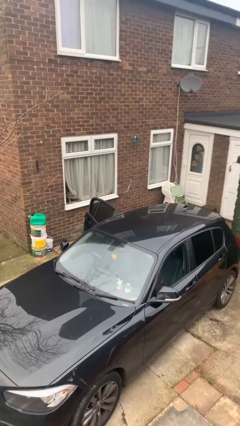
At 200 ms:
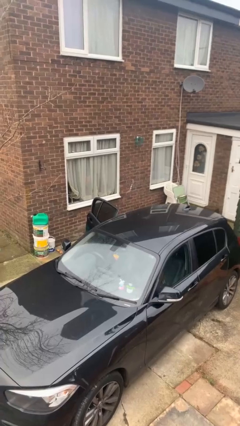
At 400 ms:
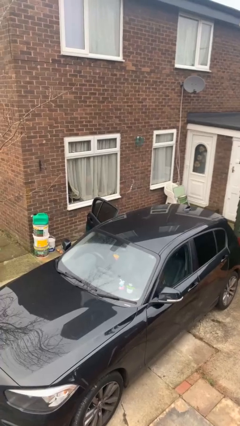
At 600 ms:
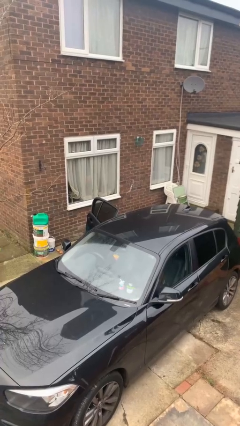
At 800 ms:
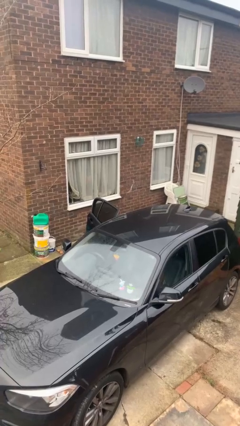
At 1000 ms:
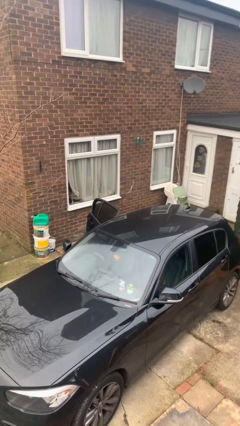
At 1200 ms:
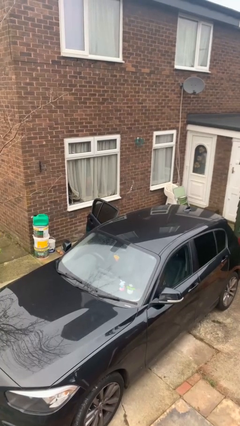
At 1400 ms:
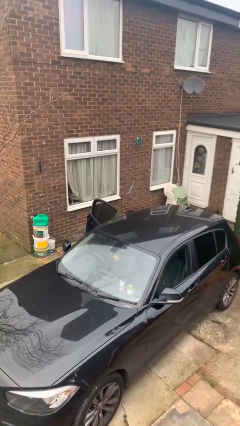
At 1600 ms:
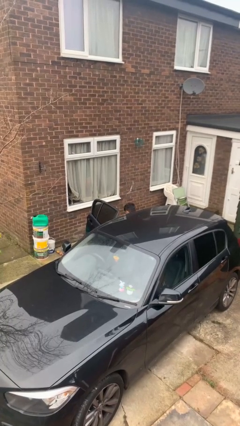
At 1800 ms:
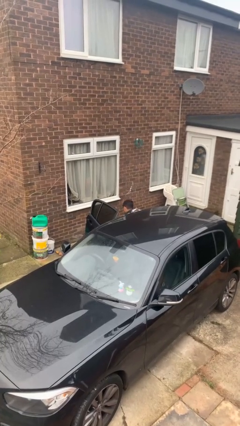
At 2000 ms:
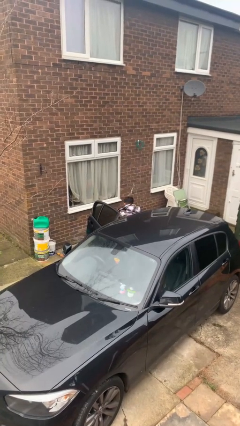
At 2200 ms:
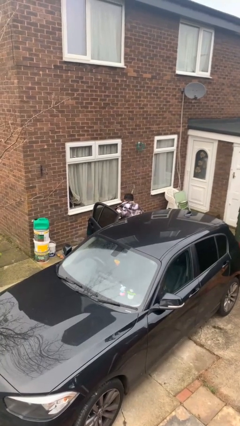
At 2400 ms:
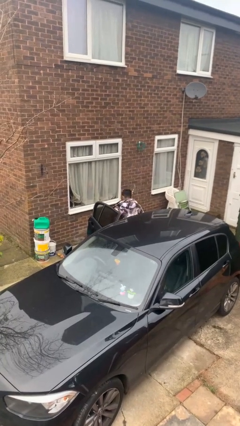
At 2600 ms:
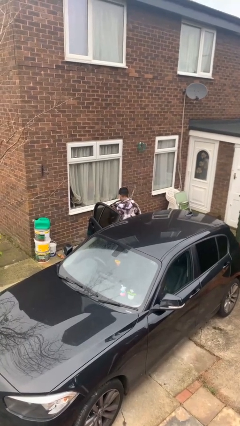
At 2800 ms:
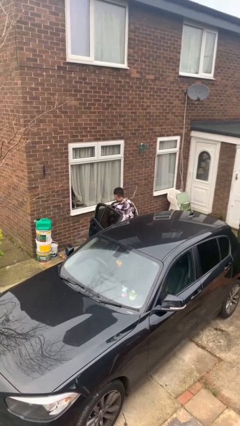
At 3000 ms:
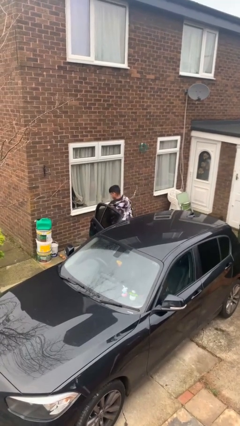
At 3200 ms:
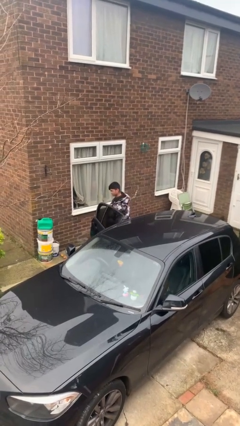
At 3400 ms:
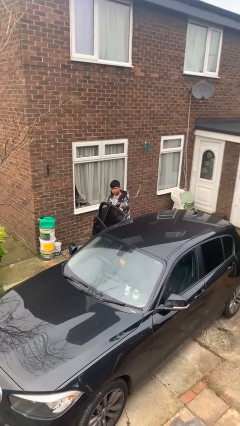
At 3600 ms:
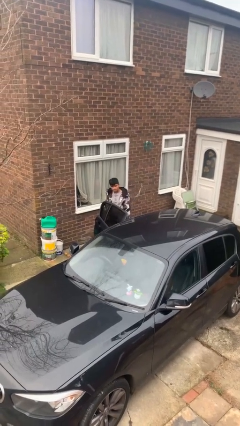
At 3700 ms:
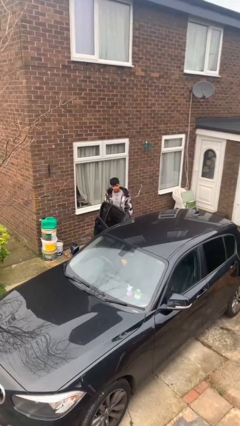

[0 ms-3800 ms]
person exits car

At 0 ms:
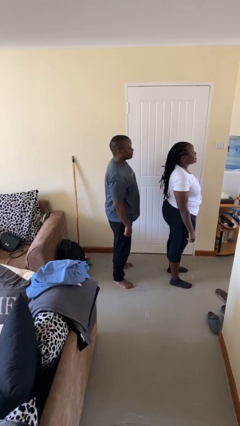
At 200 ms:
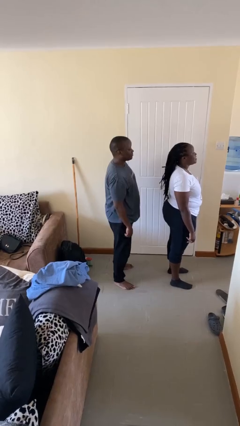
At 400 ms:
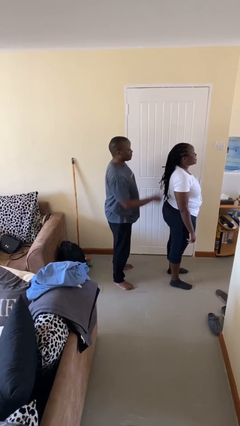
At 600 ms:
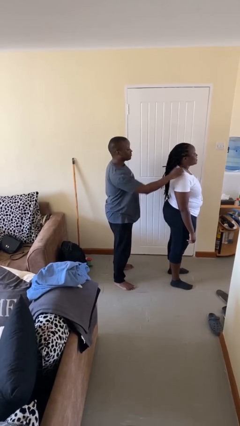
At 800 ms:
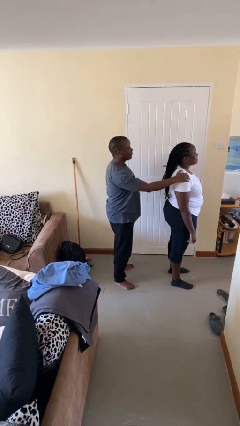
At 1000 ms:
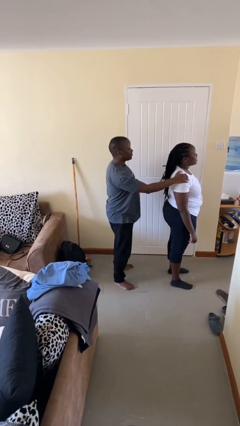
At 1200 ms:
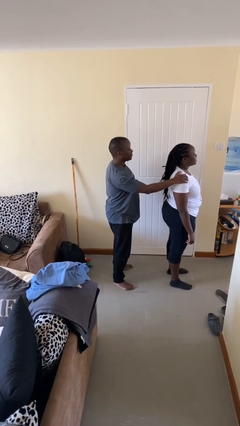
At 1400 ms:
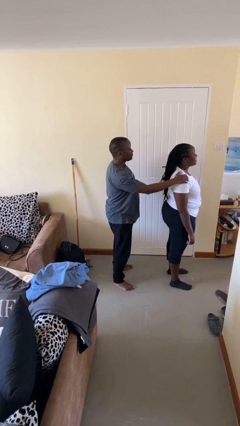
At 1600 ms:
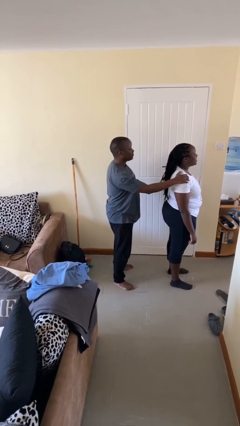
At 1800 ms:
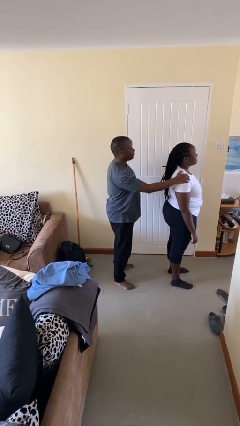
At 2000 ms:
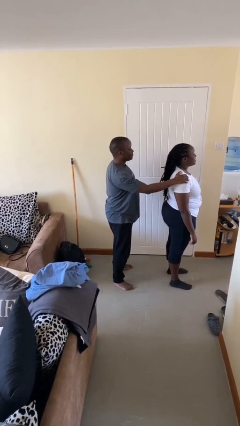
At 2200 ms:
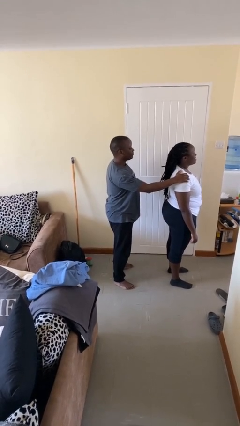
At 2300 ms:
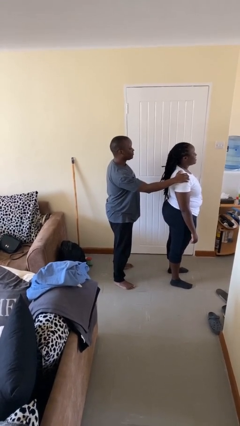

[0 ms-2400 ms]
person grabs person by shoulder

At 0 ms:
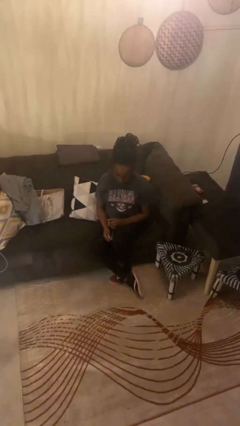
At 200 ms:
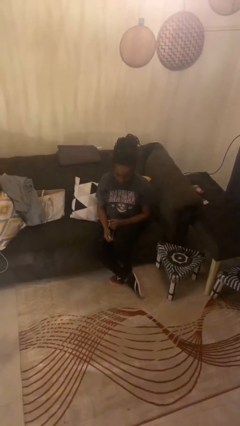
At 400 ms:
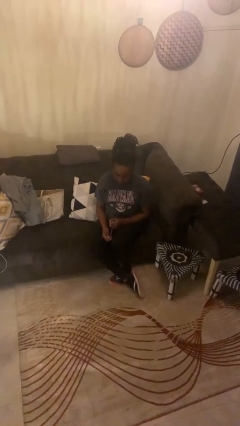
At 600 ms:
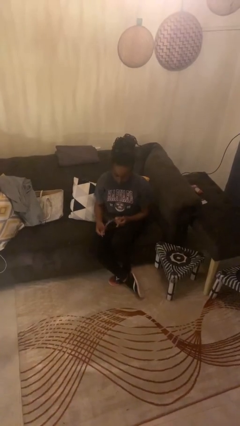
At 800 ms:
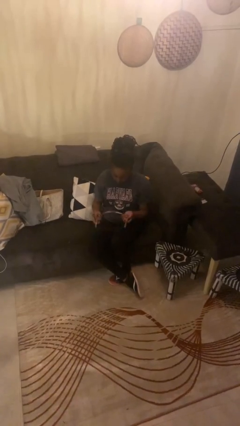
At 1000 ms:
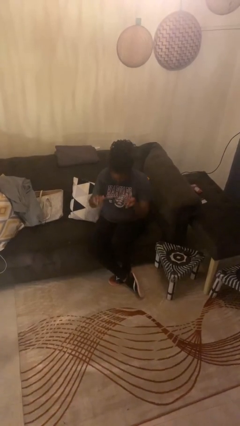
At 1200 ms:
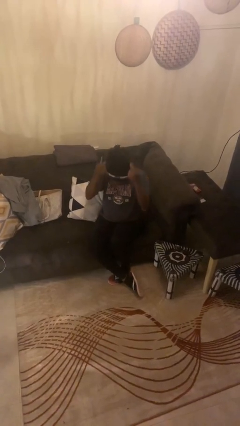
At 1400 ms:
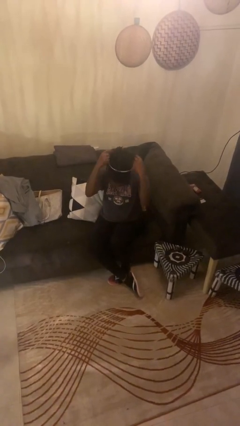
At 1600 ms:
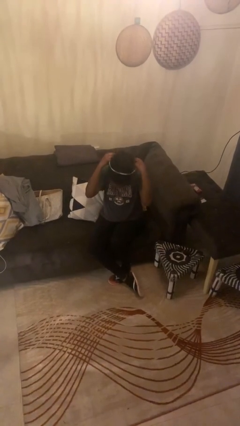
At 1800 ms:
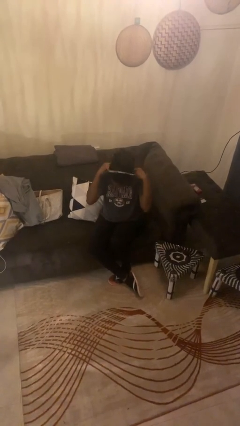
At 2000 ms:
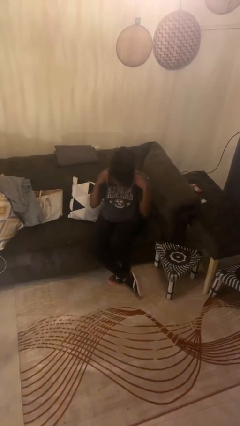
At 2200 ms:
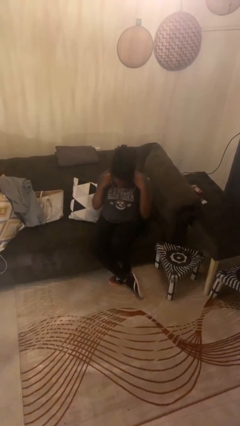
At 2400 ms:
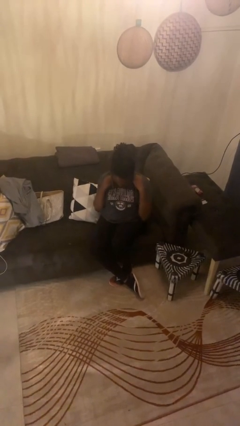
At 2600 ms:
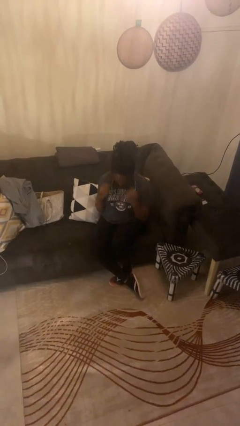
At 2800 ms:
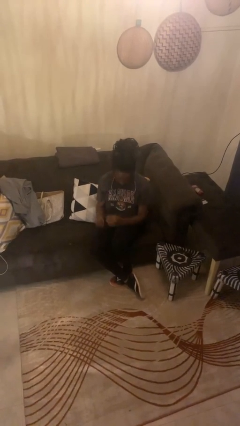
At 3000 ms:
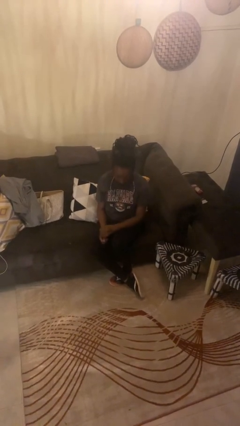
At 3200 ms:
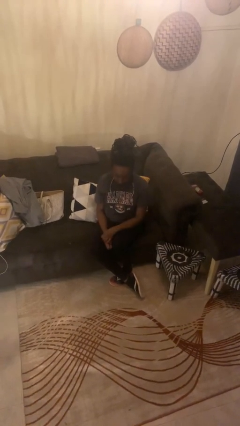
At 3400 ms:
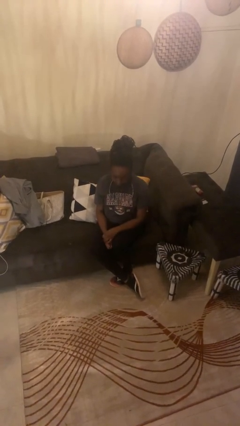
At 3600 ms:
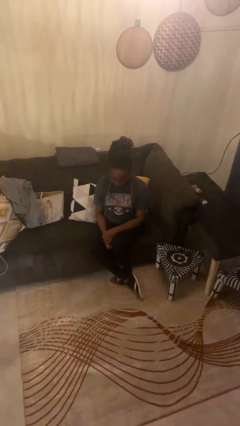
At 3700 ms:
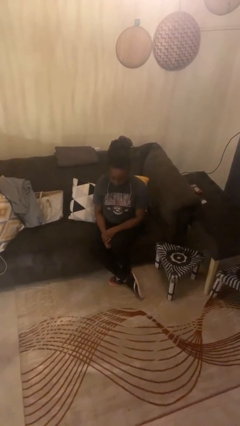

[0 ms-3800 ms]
person puts on necklace

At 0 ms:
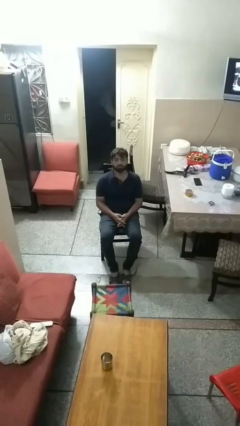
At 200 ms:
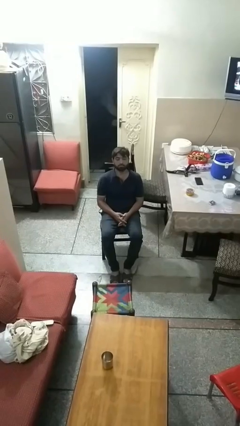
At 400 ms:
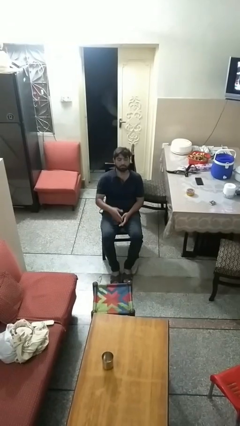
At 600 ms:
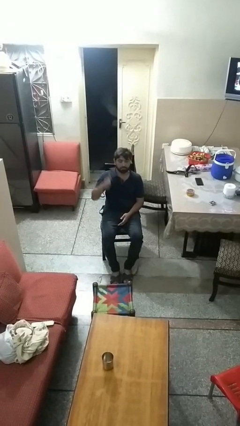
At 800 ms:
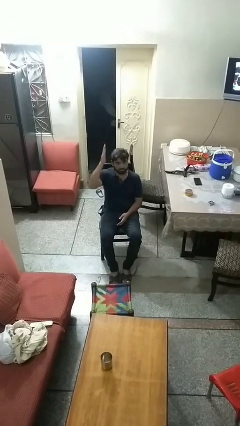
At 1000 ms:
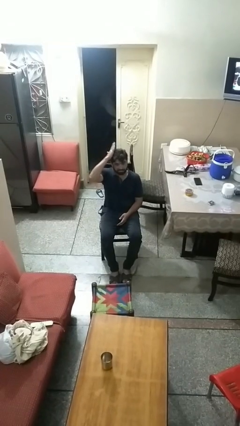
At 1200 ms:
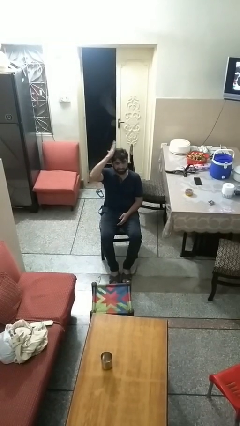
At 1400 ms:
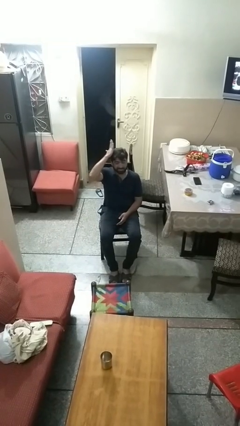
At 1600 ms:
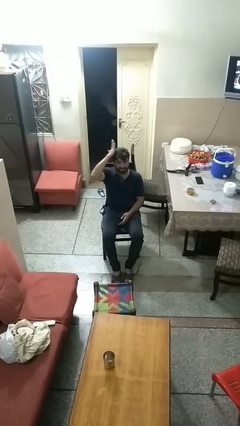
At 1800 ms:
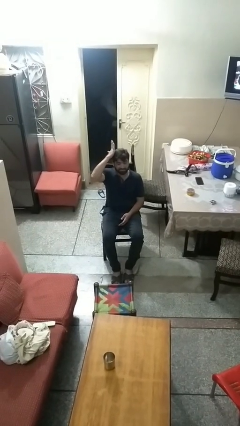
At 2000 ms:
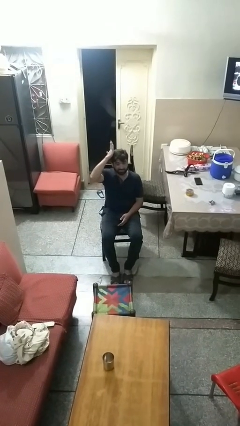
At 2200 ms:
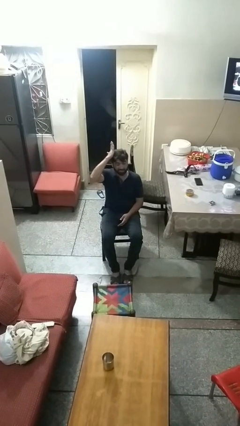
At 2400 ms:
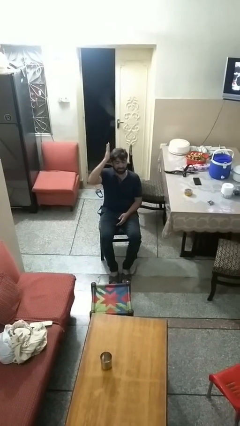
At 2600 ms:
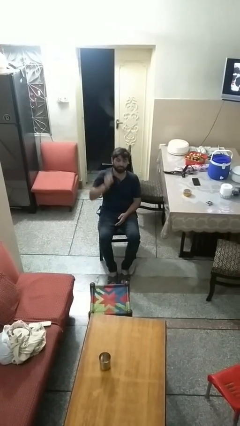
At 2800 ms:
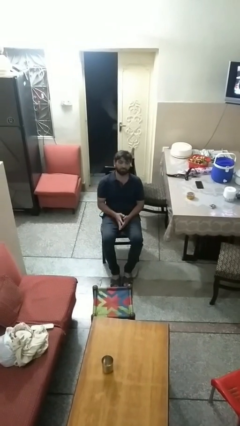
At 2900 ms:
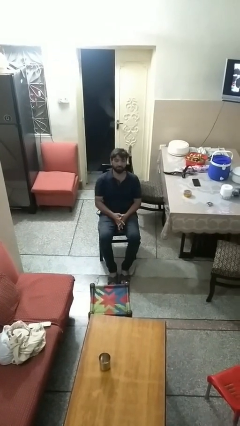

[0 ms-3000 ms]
person pats head

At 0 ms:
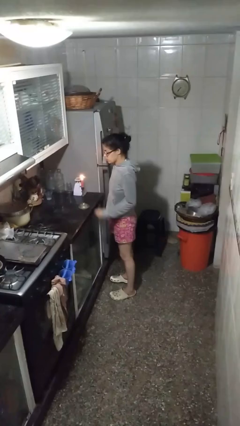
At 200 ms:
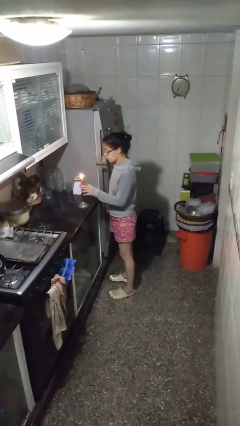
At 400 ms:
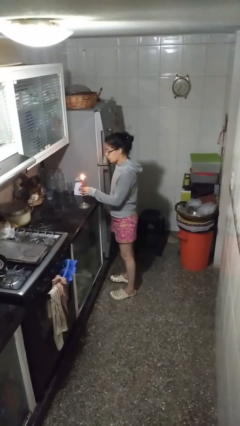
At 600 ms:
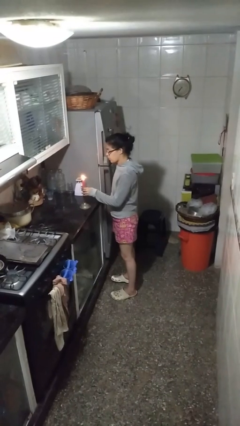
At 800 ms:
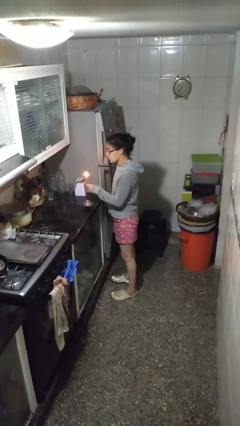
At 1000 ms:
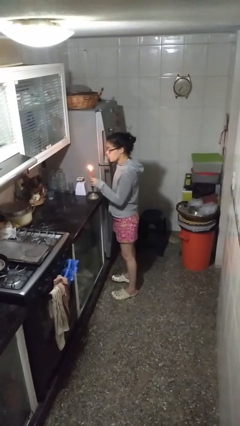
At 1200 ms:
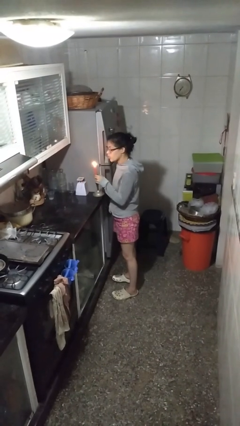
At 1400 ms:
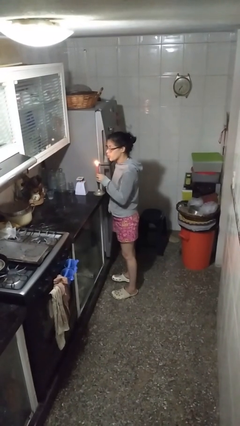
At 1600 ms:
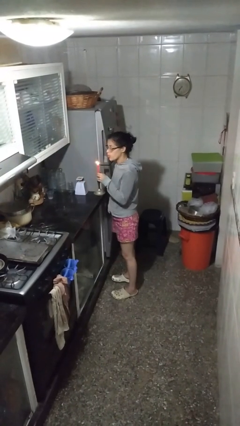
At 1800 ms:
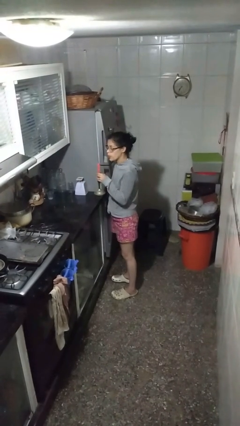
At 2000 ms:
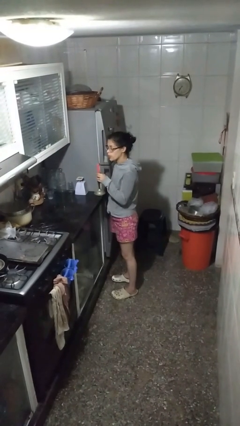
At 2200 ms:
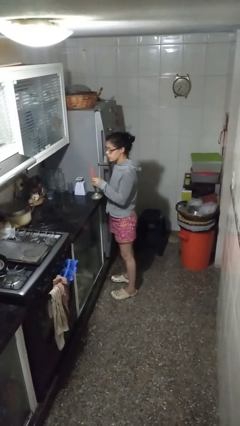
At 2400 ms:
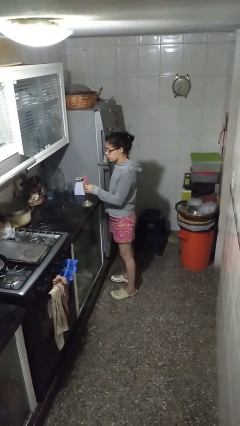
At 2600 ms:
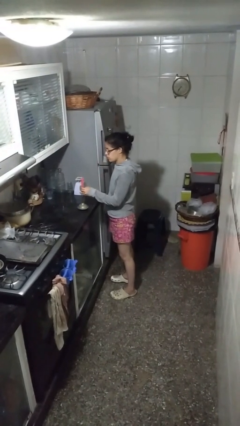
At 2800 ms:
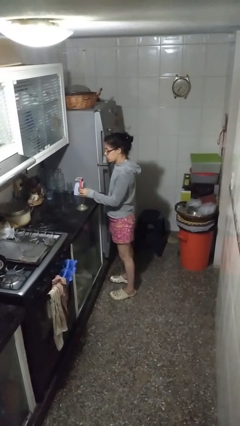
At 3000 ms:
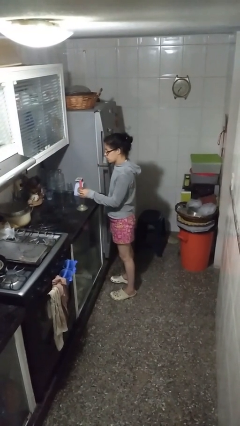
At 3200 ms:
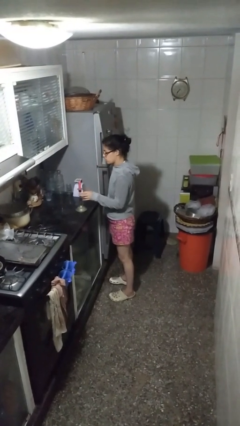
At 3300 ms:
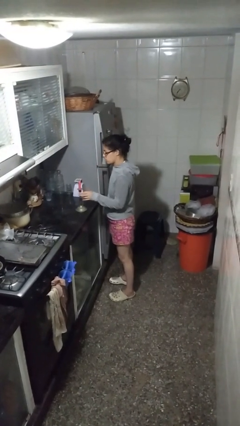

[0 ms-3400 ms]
person extinguishes candle

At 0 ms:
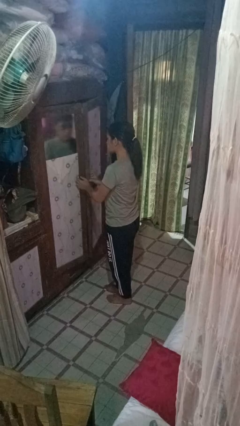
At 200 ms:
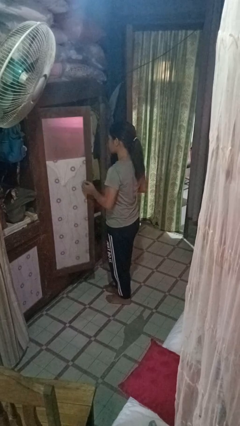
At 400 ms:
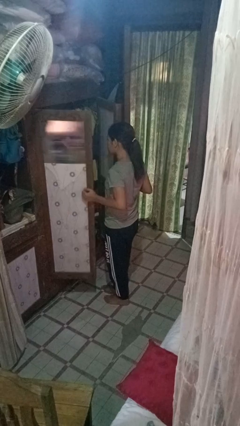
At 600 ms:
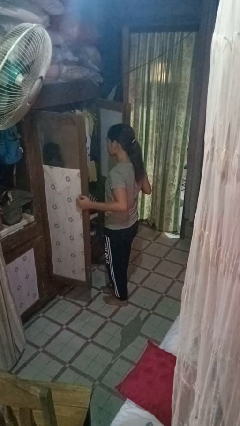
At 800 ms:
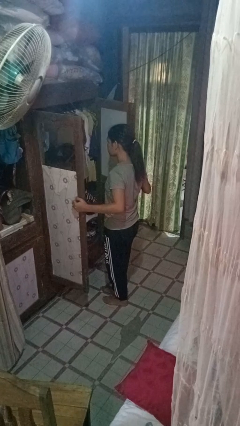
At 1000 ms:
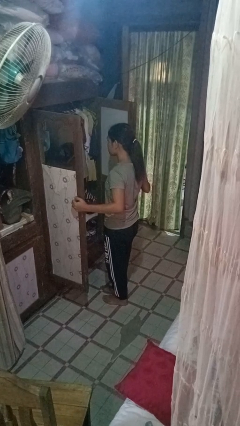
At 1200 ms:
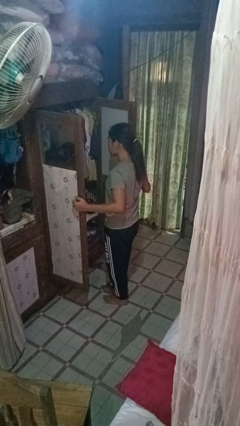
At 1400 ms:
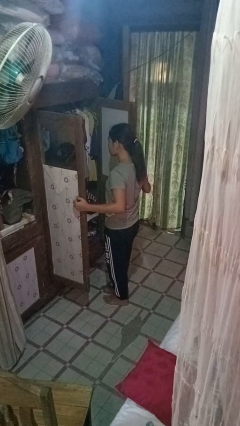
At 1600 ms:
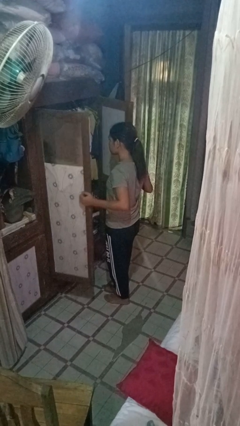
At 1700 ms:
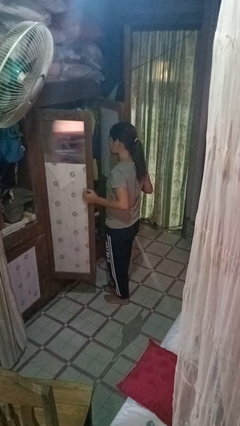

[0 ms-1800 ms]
person opens closet door
